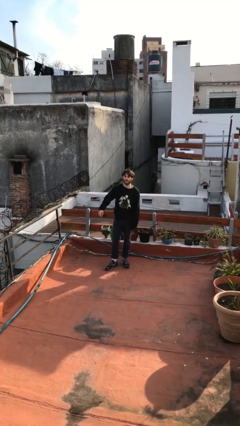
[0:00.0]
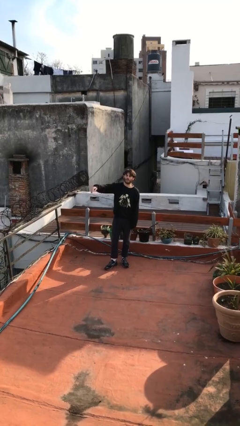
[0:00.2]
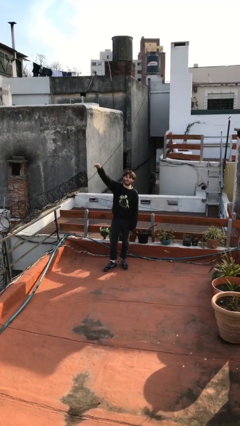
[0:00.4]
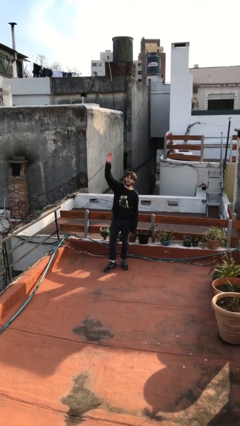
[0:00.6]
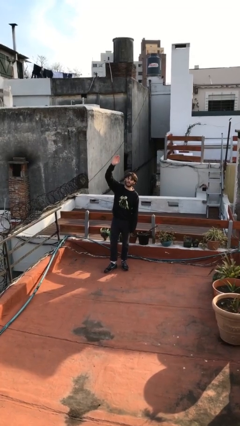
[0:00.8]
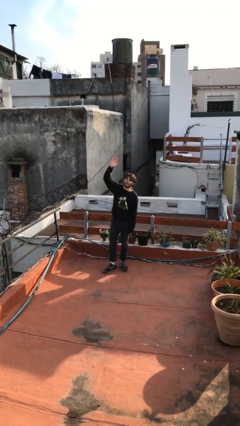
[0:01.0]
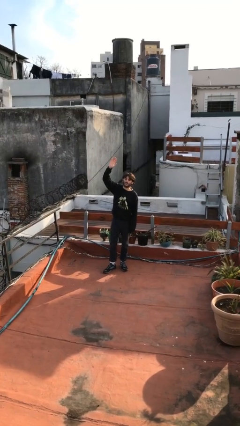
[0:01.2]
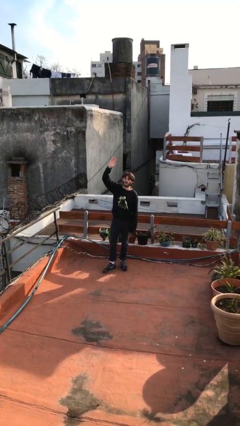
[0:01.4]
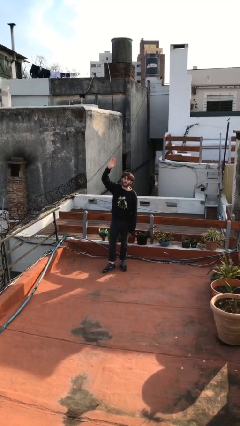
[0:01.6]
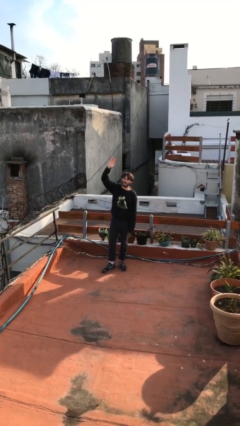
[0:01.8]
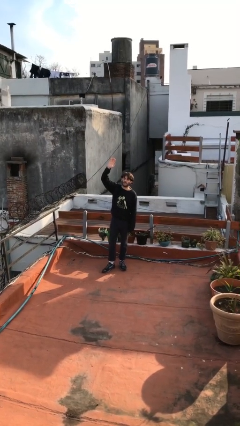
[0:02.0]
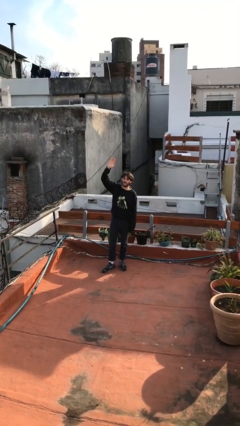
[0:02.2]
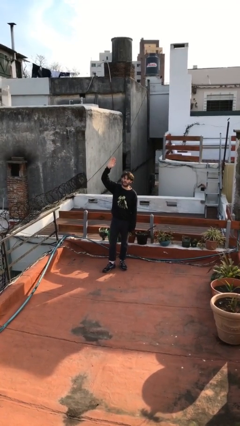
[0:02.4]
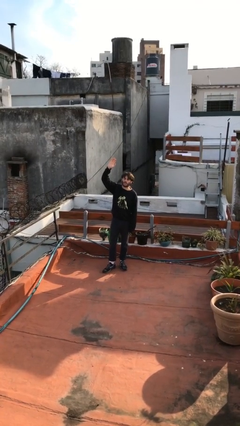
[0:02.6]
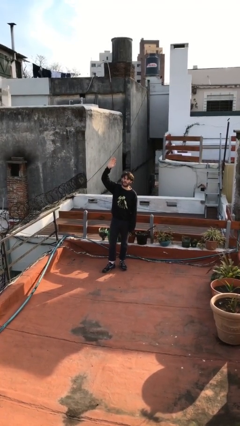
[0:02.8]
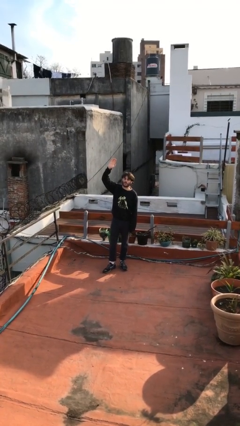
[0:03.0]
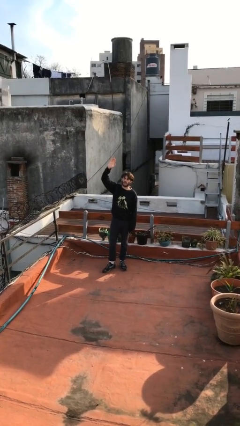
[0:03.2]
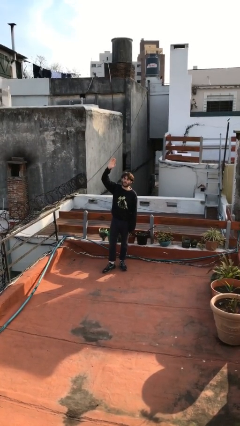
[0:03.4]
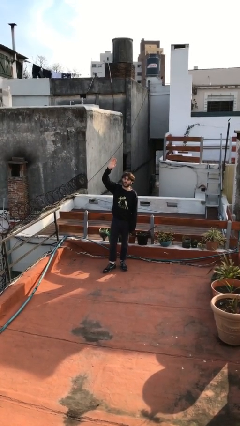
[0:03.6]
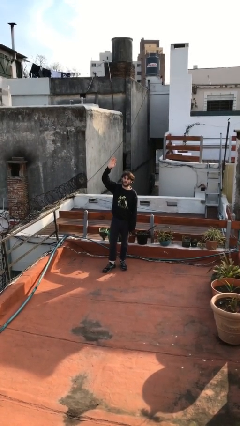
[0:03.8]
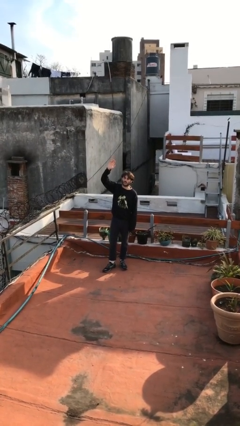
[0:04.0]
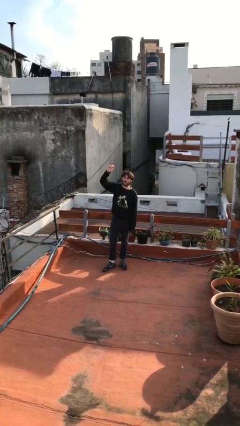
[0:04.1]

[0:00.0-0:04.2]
person gestures raise hand

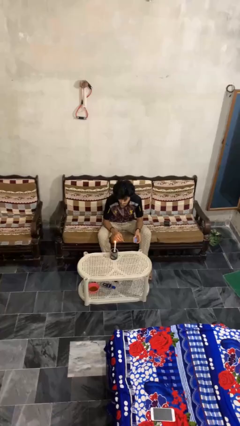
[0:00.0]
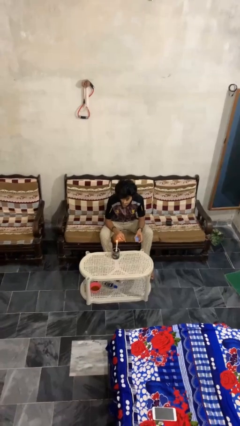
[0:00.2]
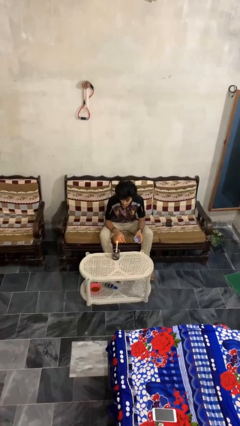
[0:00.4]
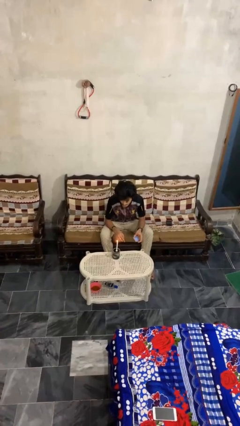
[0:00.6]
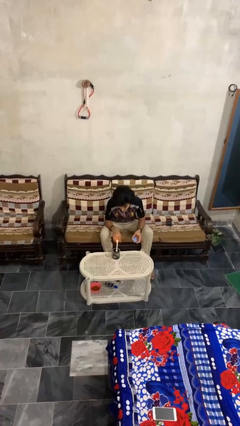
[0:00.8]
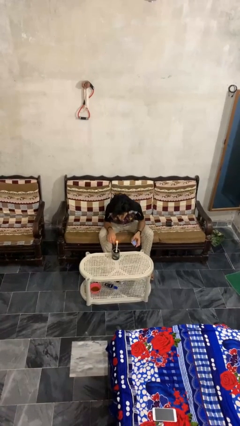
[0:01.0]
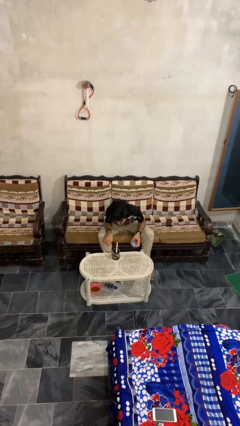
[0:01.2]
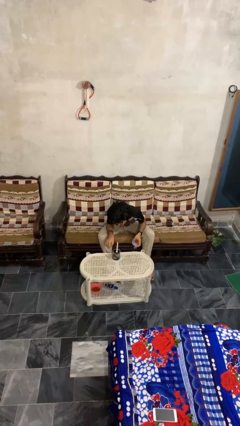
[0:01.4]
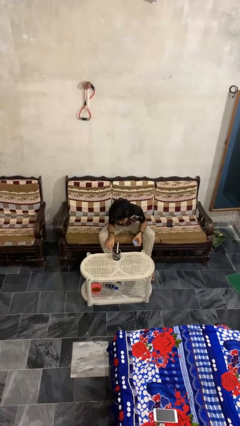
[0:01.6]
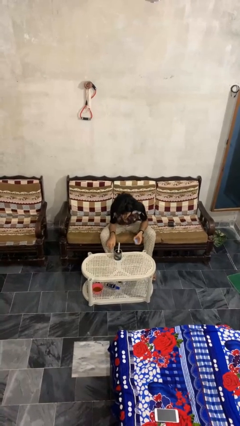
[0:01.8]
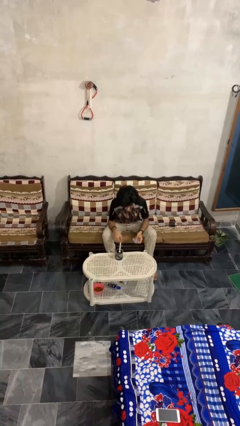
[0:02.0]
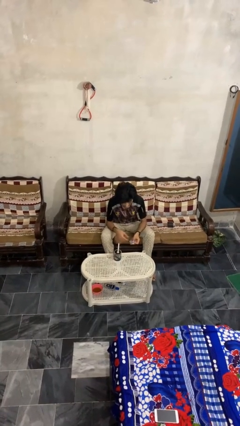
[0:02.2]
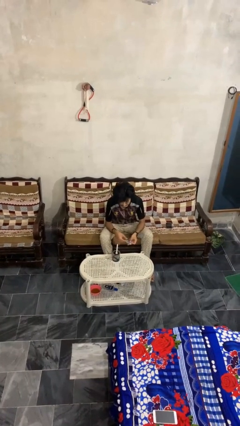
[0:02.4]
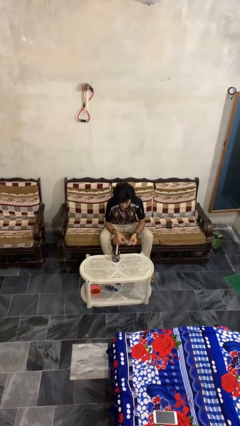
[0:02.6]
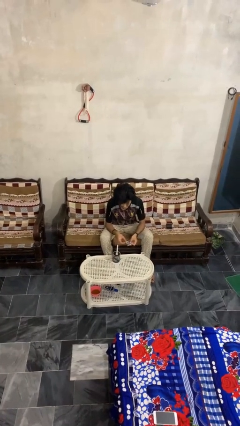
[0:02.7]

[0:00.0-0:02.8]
person extinguishes candle

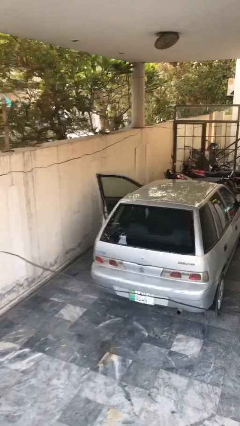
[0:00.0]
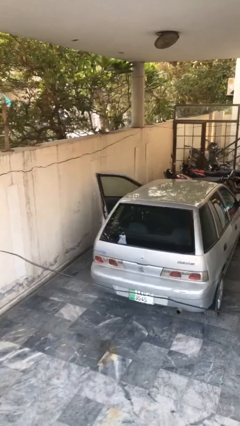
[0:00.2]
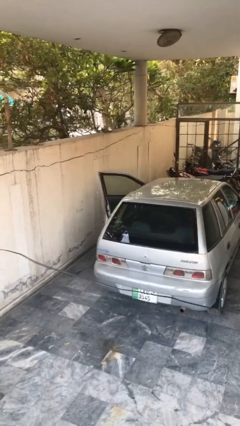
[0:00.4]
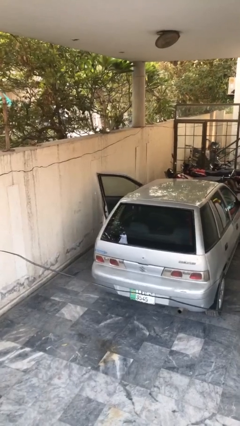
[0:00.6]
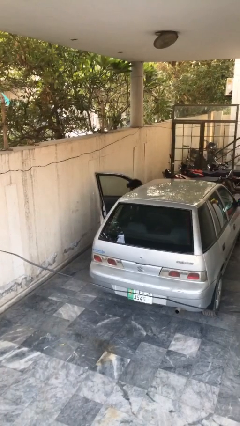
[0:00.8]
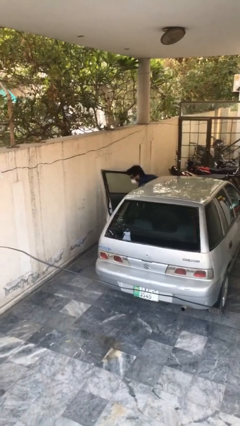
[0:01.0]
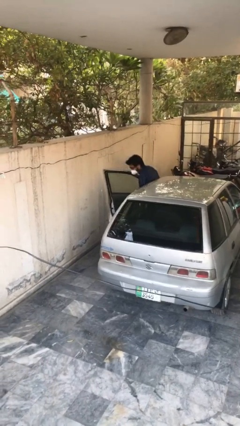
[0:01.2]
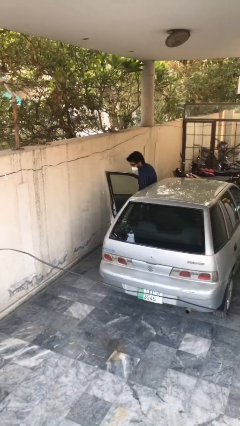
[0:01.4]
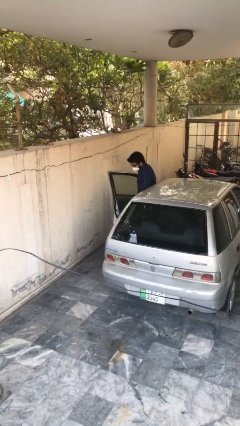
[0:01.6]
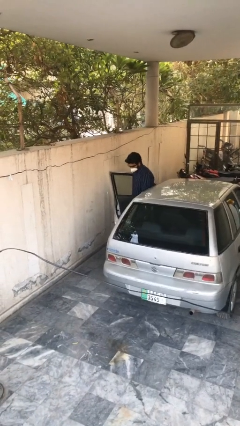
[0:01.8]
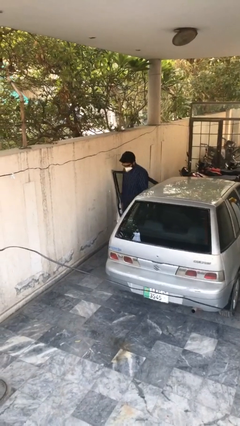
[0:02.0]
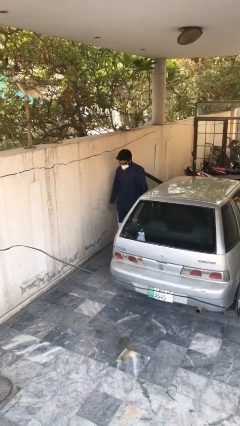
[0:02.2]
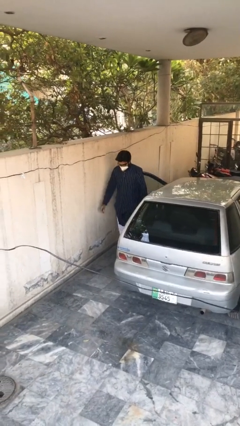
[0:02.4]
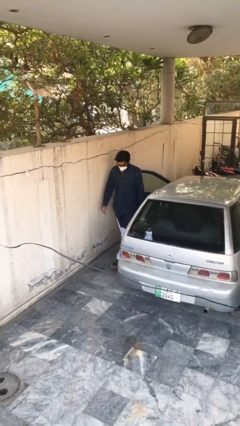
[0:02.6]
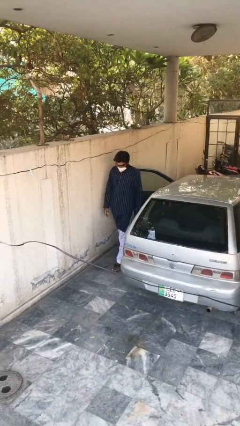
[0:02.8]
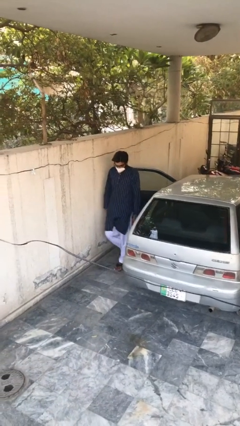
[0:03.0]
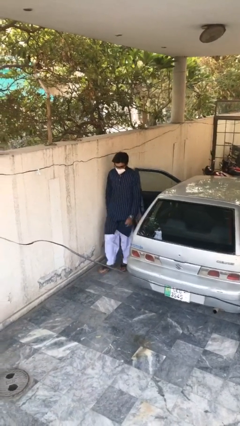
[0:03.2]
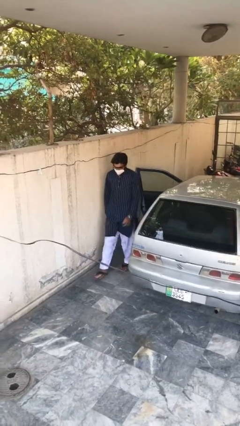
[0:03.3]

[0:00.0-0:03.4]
person exits car

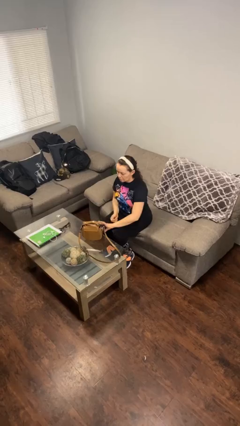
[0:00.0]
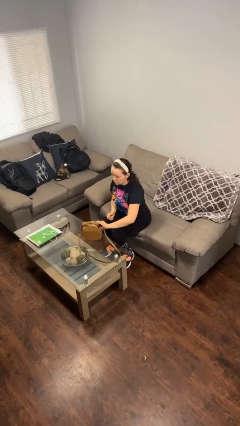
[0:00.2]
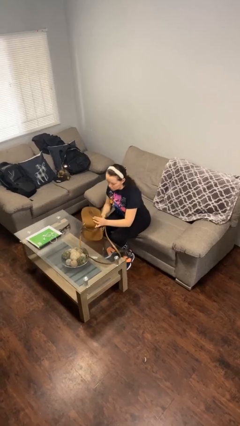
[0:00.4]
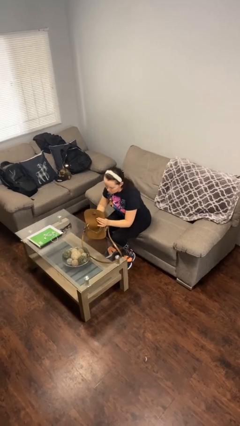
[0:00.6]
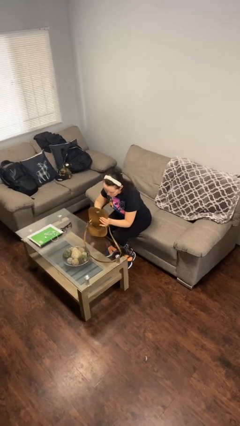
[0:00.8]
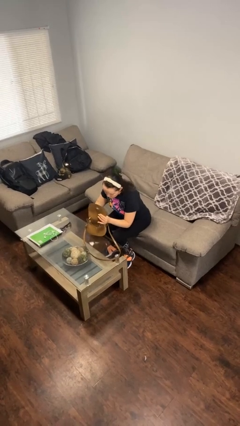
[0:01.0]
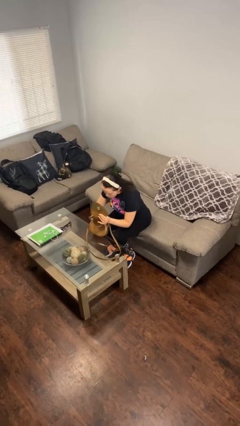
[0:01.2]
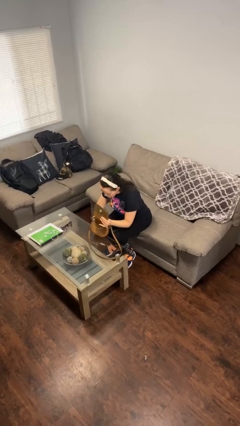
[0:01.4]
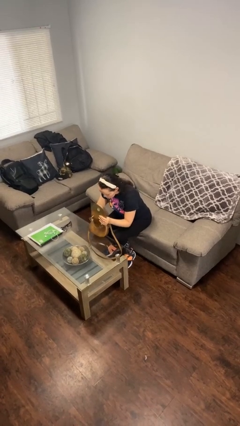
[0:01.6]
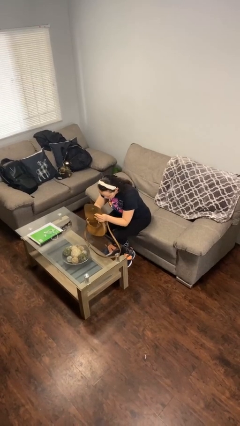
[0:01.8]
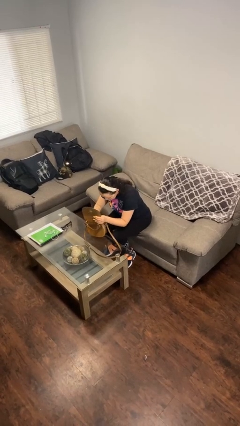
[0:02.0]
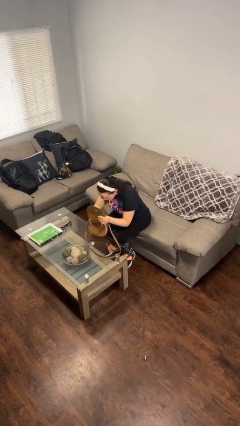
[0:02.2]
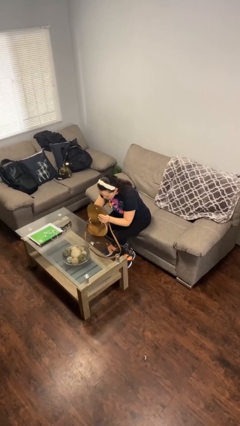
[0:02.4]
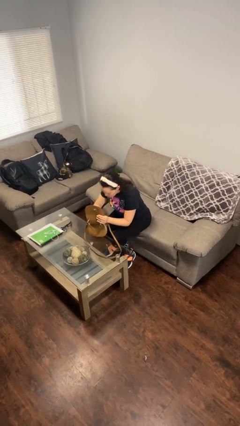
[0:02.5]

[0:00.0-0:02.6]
person searches in purse

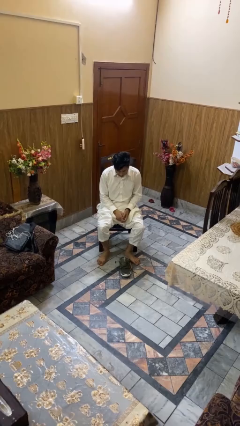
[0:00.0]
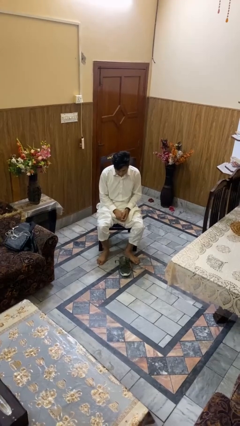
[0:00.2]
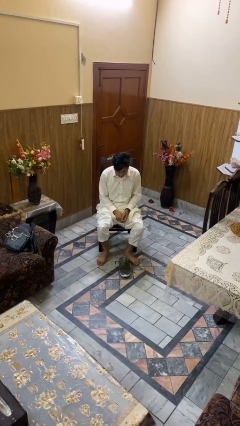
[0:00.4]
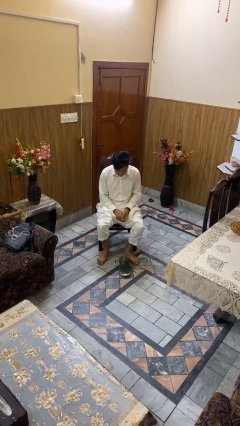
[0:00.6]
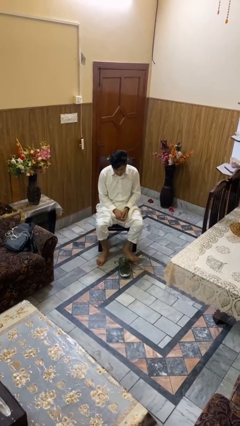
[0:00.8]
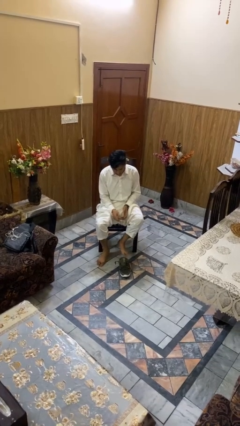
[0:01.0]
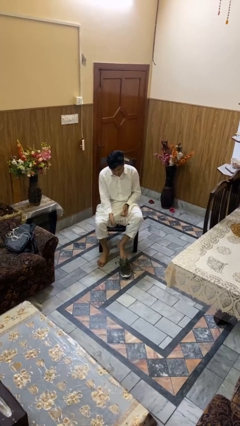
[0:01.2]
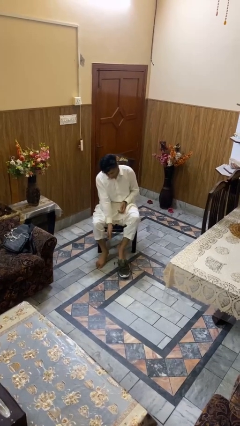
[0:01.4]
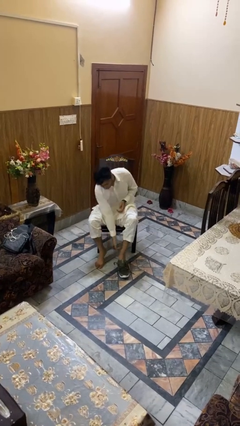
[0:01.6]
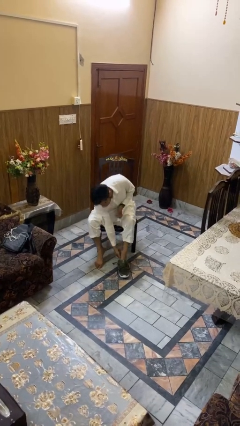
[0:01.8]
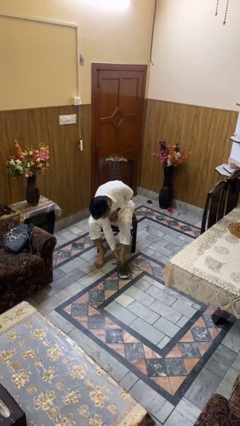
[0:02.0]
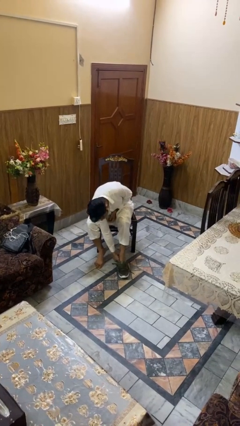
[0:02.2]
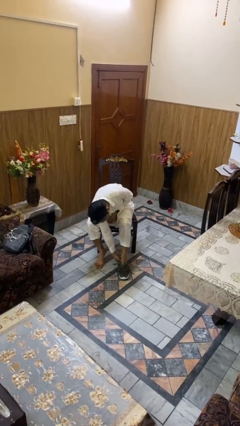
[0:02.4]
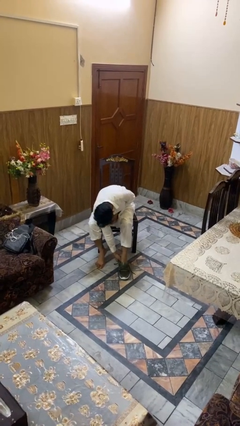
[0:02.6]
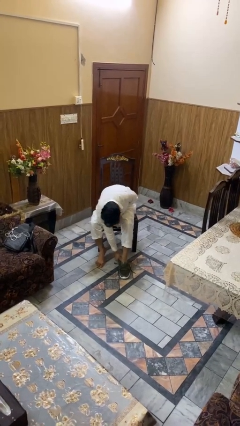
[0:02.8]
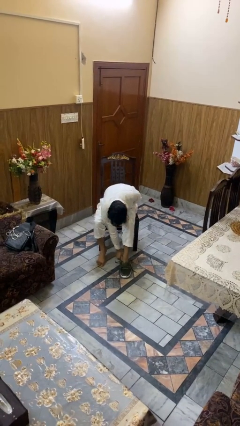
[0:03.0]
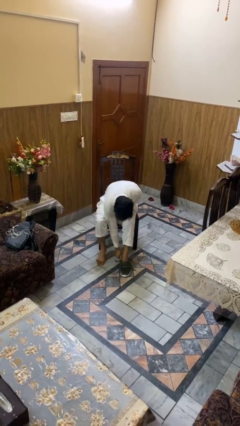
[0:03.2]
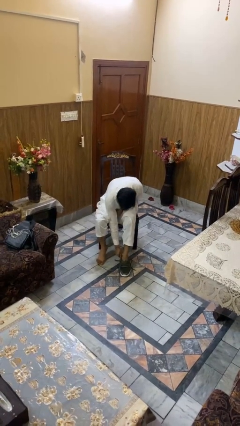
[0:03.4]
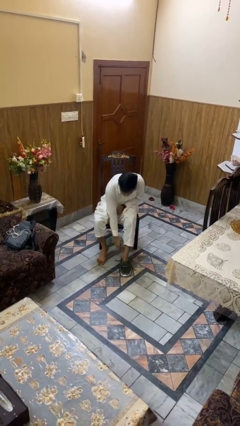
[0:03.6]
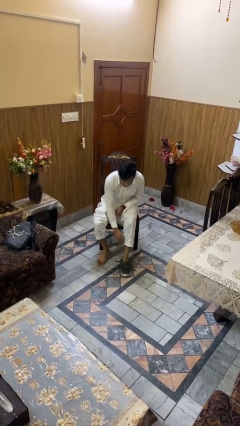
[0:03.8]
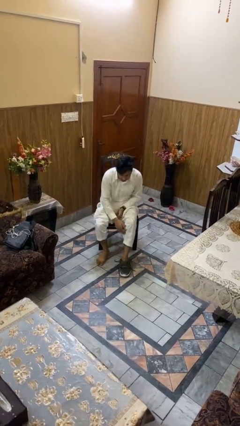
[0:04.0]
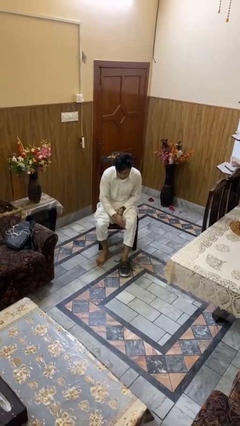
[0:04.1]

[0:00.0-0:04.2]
person puts on shoes

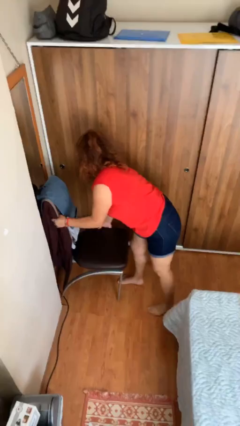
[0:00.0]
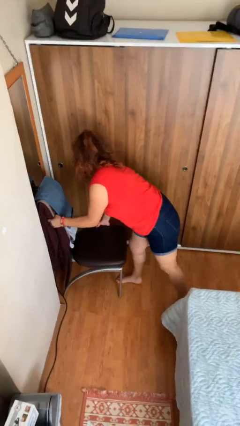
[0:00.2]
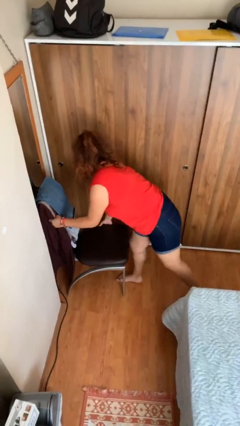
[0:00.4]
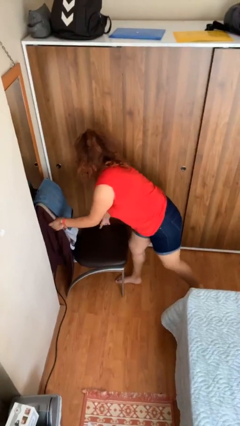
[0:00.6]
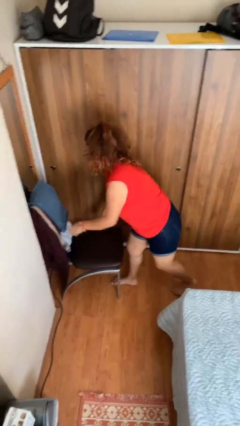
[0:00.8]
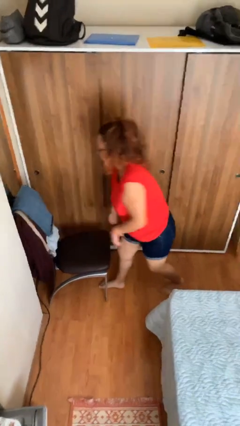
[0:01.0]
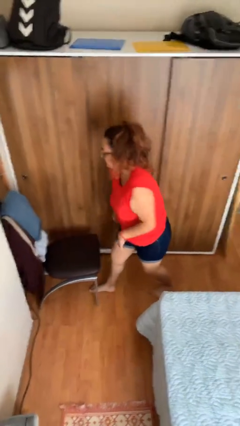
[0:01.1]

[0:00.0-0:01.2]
person puts down object on floor
